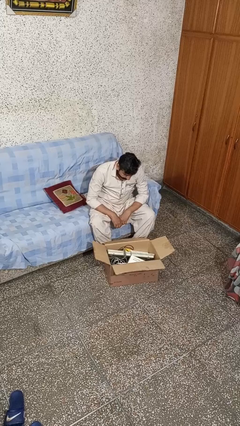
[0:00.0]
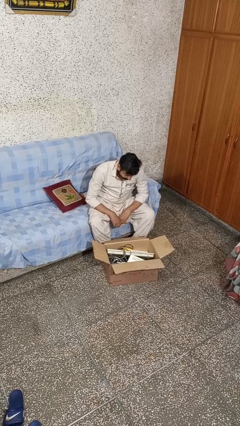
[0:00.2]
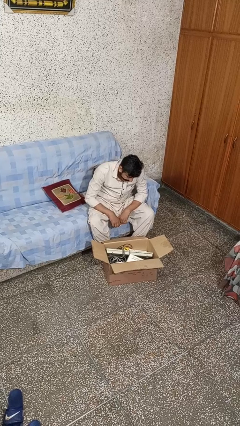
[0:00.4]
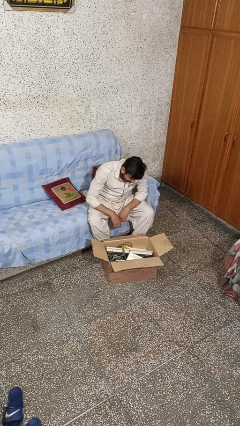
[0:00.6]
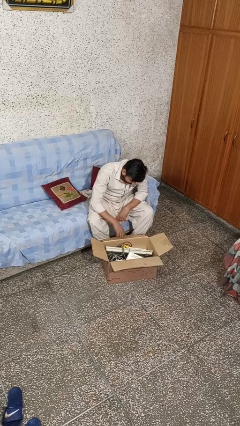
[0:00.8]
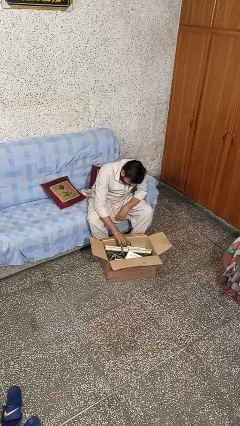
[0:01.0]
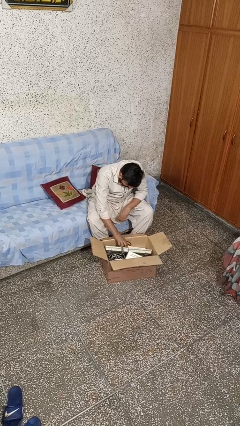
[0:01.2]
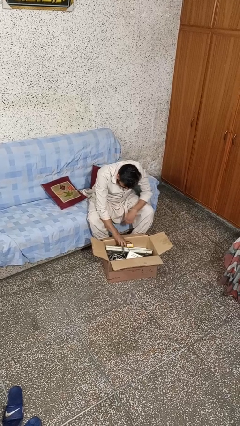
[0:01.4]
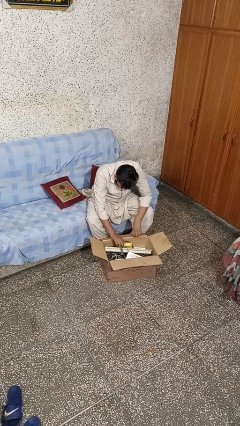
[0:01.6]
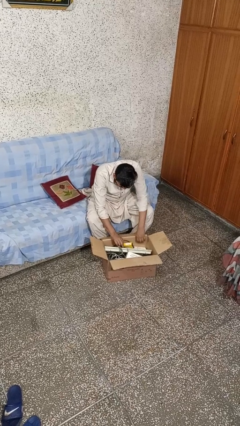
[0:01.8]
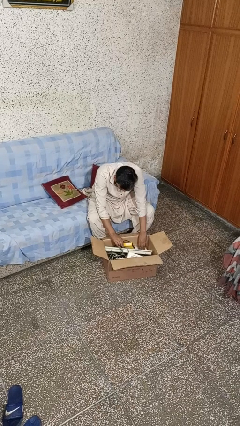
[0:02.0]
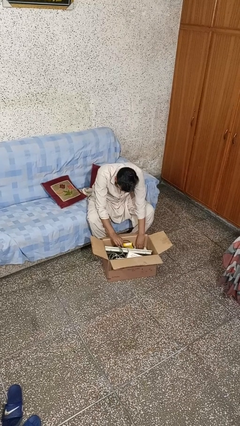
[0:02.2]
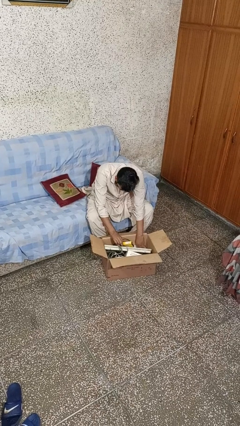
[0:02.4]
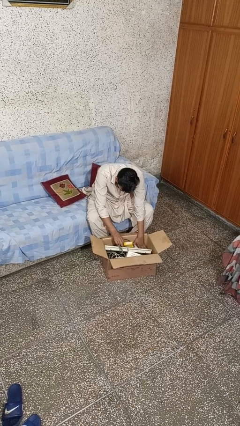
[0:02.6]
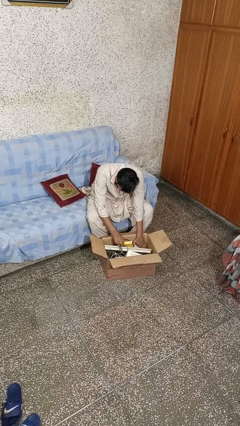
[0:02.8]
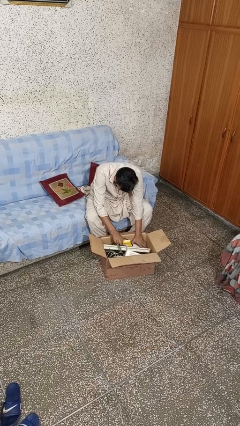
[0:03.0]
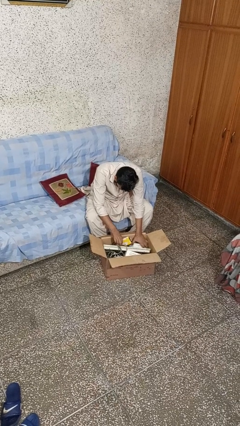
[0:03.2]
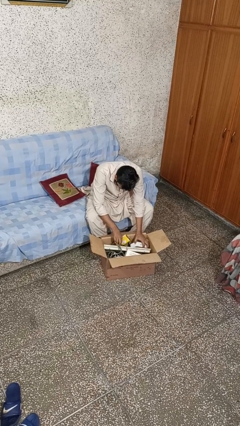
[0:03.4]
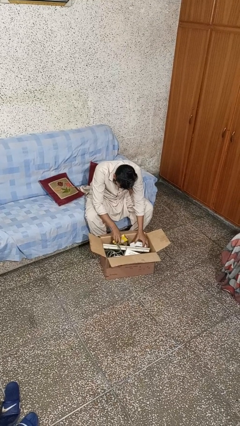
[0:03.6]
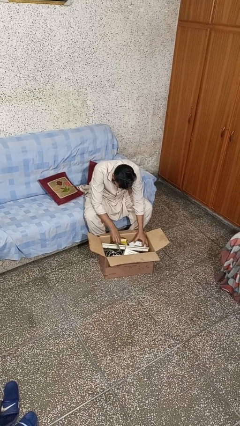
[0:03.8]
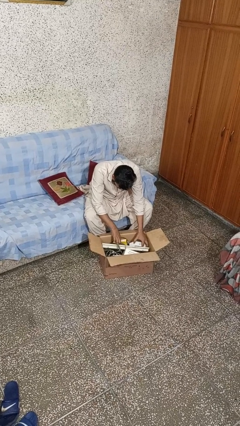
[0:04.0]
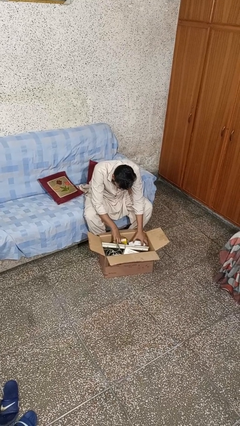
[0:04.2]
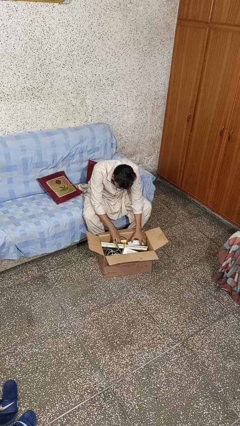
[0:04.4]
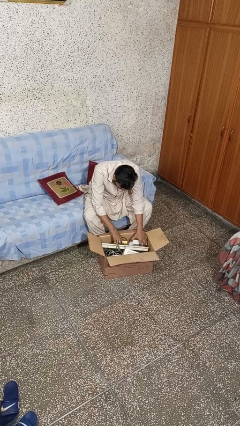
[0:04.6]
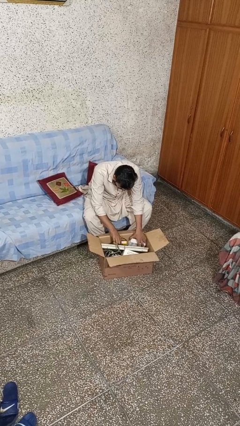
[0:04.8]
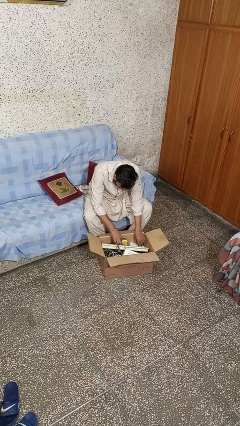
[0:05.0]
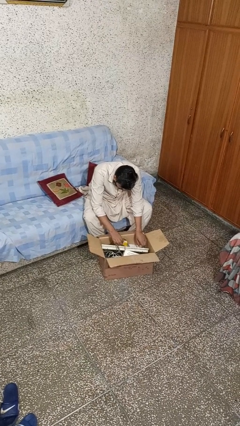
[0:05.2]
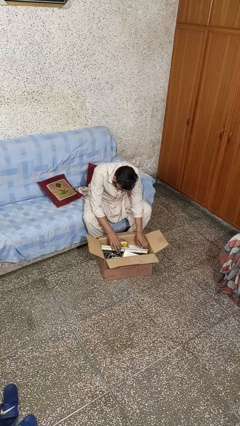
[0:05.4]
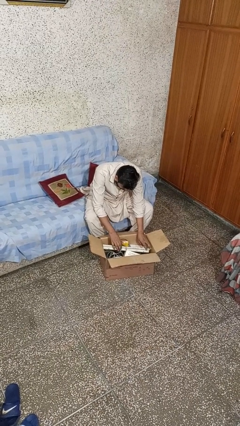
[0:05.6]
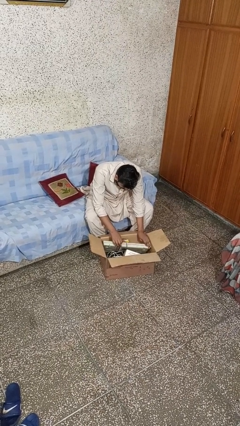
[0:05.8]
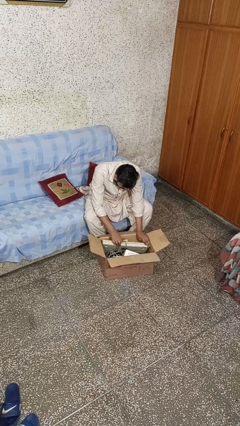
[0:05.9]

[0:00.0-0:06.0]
person searches in box

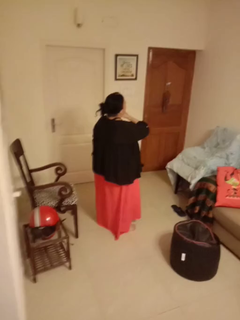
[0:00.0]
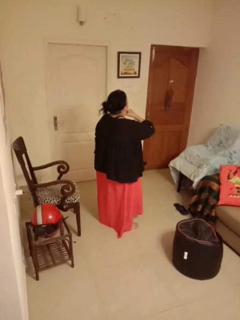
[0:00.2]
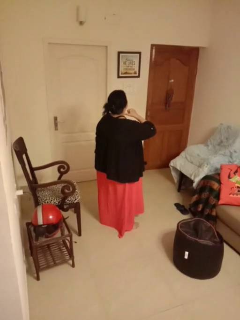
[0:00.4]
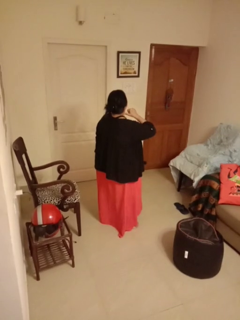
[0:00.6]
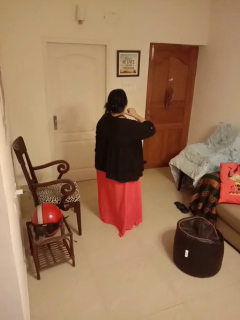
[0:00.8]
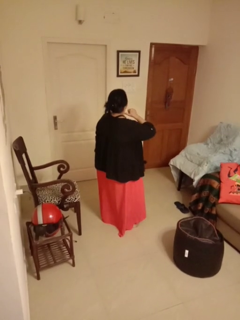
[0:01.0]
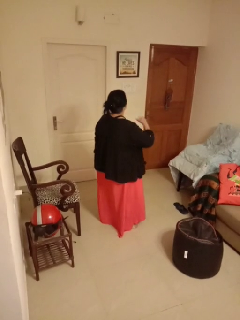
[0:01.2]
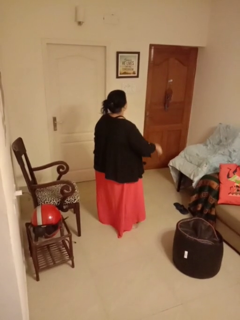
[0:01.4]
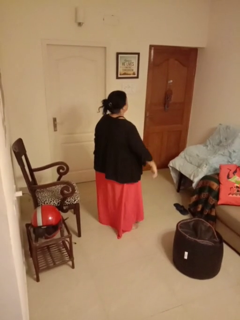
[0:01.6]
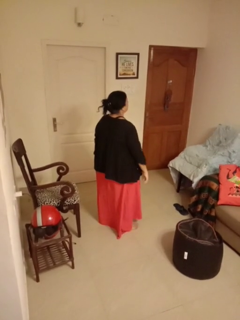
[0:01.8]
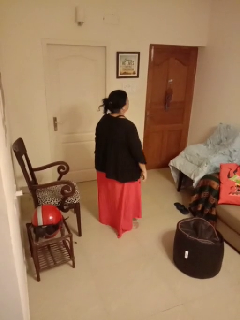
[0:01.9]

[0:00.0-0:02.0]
person gestures cut

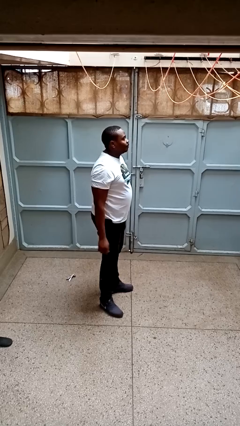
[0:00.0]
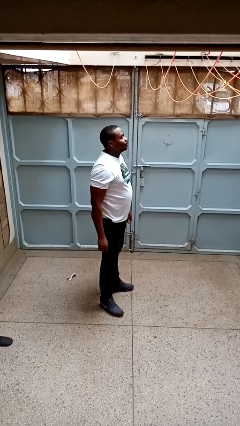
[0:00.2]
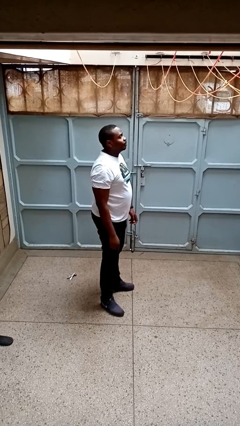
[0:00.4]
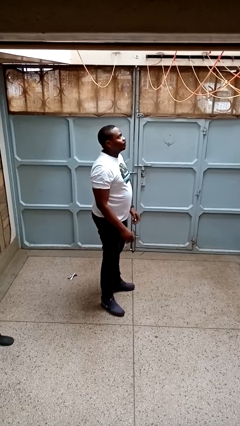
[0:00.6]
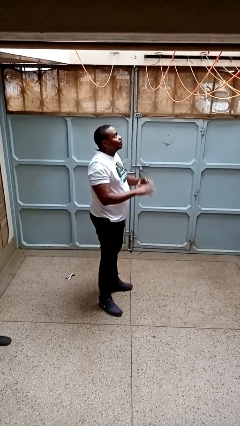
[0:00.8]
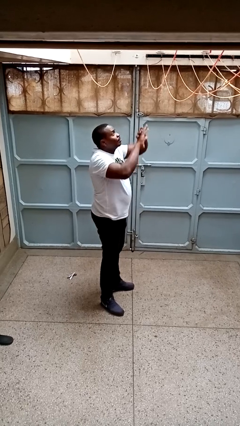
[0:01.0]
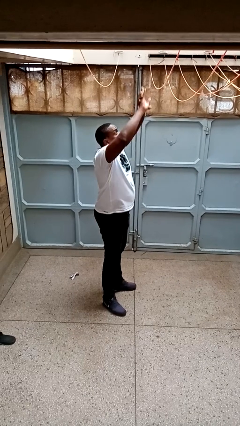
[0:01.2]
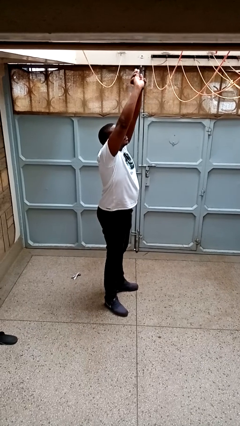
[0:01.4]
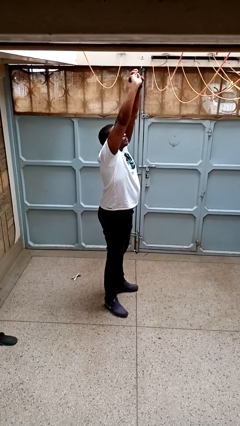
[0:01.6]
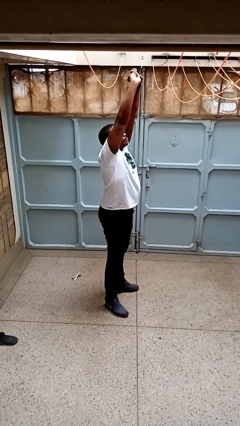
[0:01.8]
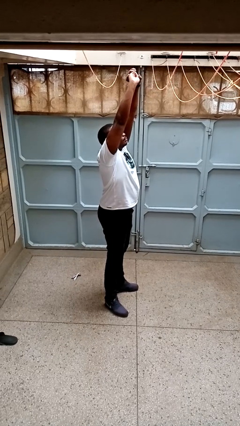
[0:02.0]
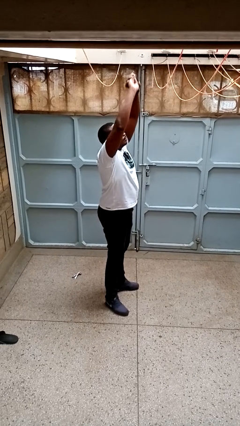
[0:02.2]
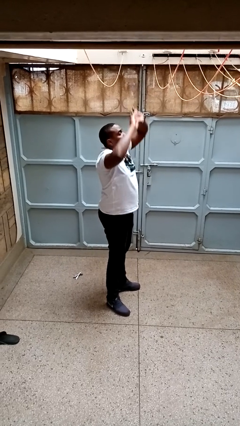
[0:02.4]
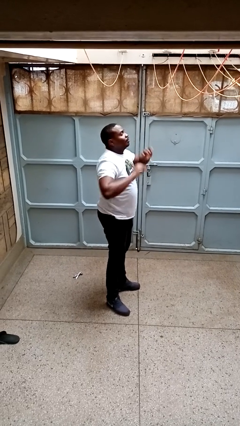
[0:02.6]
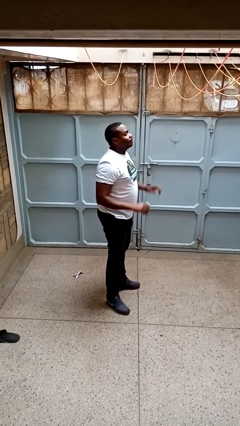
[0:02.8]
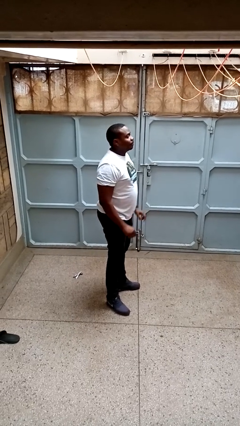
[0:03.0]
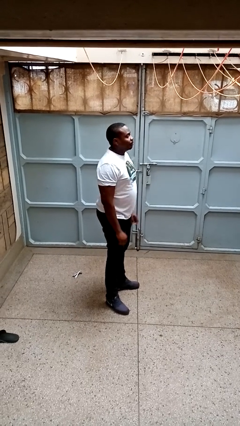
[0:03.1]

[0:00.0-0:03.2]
person stretches arms over head

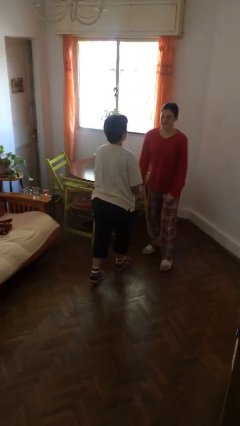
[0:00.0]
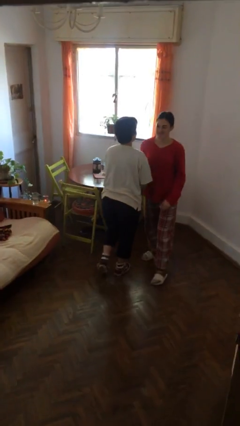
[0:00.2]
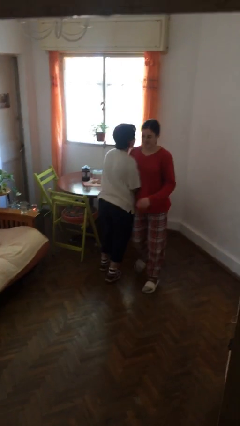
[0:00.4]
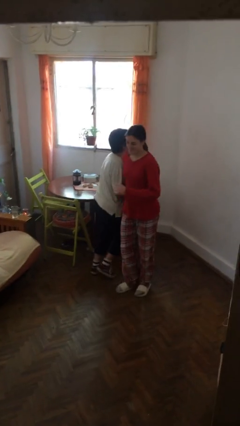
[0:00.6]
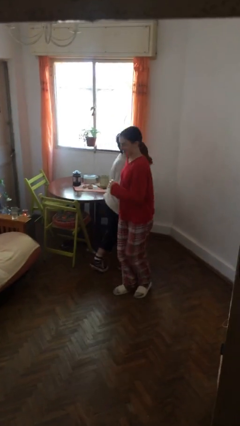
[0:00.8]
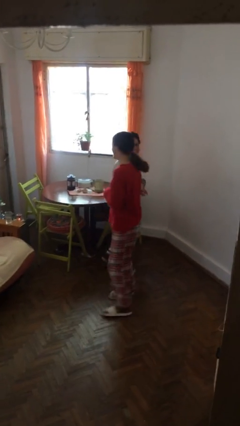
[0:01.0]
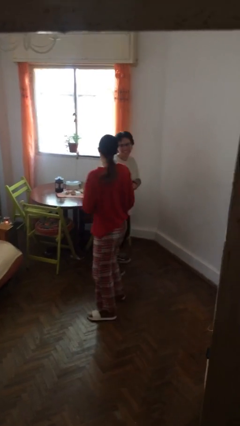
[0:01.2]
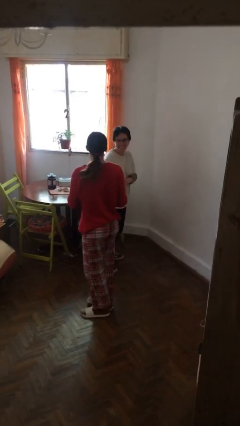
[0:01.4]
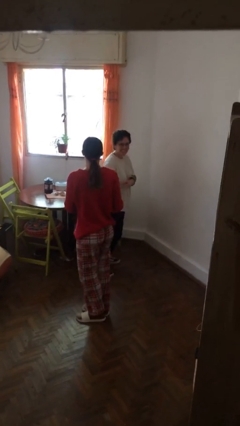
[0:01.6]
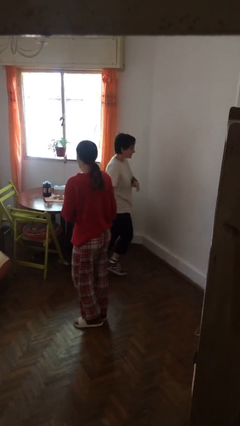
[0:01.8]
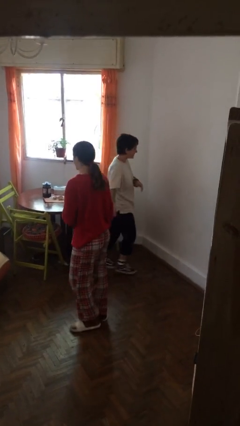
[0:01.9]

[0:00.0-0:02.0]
person bumps into person

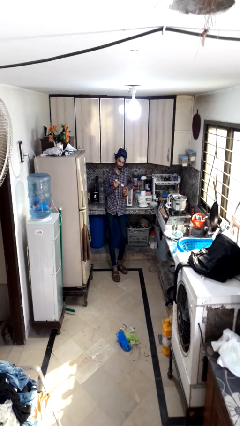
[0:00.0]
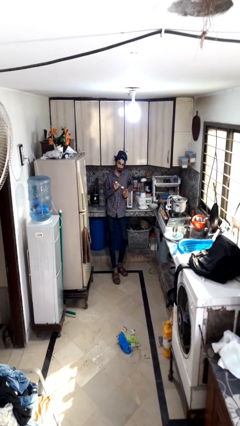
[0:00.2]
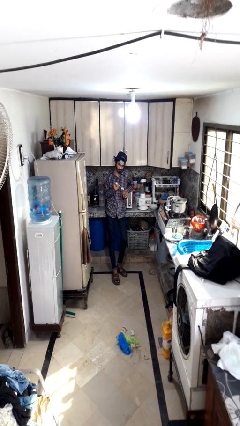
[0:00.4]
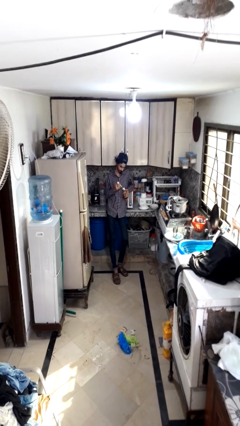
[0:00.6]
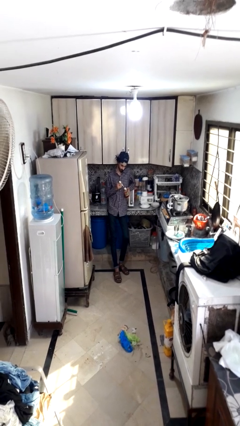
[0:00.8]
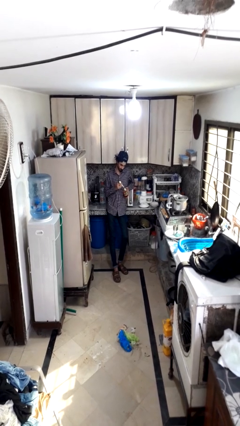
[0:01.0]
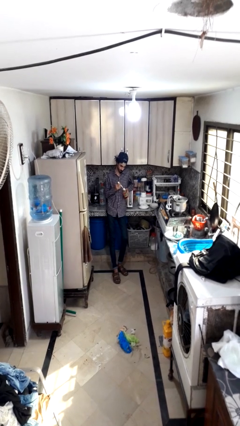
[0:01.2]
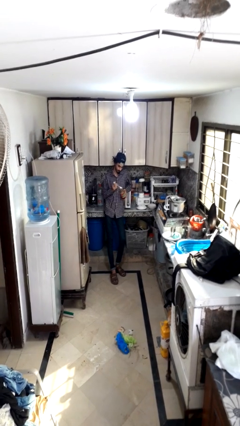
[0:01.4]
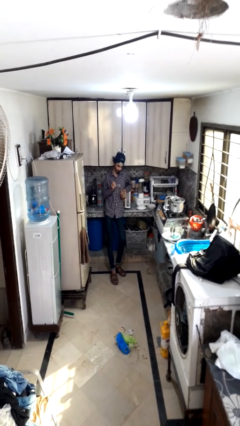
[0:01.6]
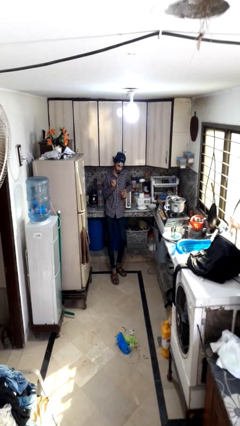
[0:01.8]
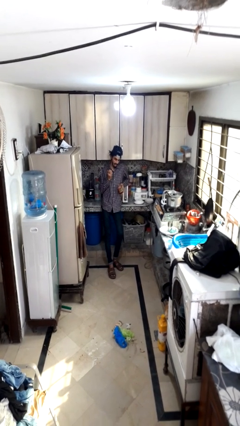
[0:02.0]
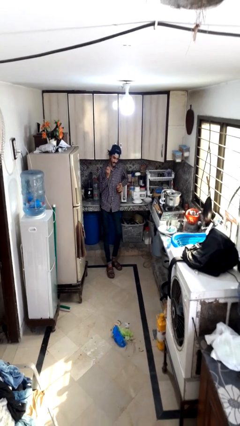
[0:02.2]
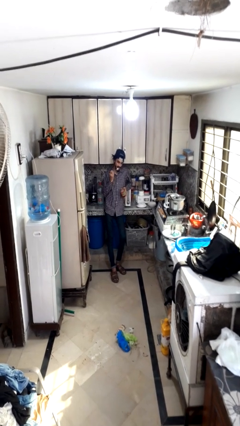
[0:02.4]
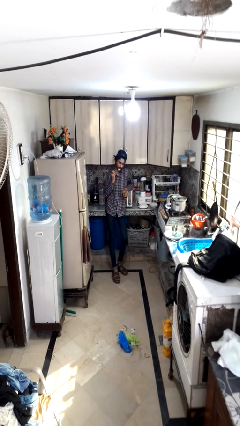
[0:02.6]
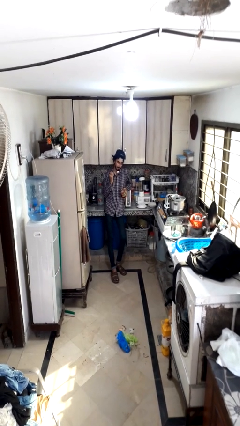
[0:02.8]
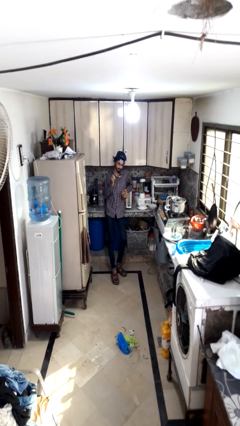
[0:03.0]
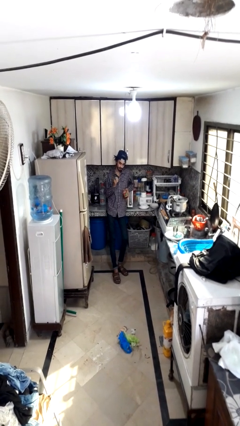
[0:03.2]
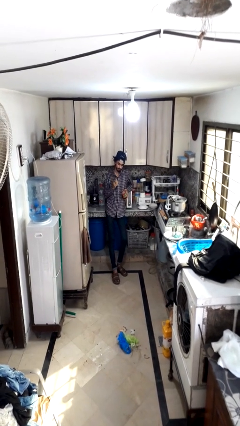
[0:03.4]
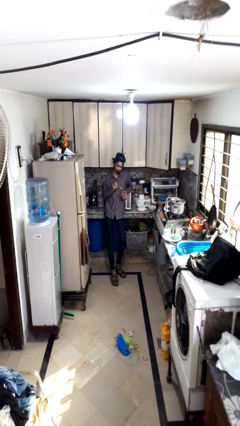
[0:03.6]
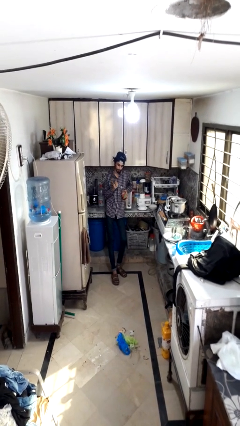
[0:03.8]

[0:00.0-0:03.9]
person eats with utensil

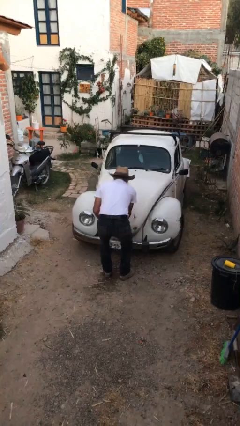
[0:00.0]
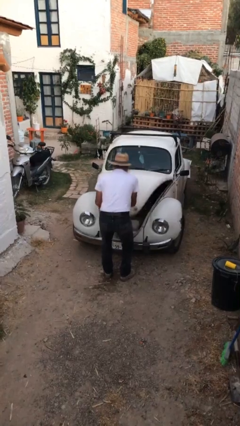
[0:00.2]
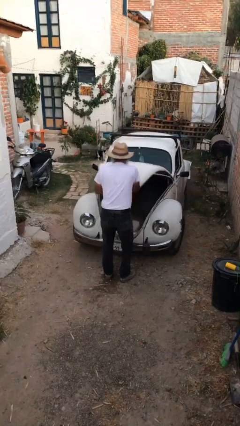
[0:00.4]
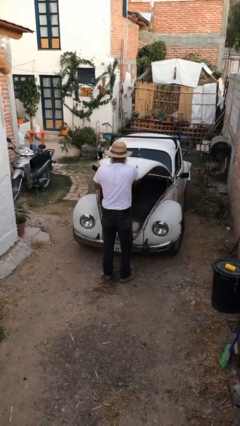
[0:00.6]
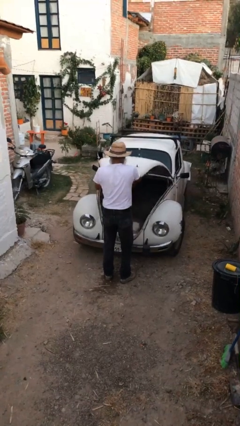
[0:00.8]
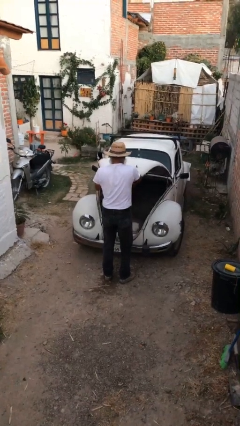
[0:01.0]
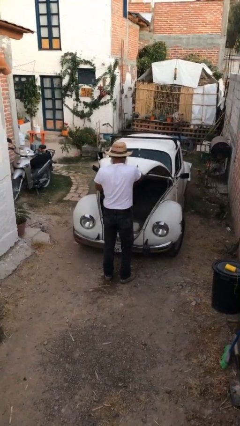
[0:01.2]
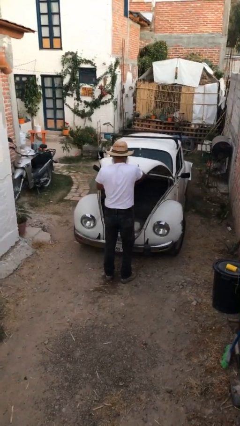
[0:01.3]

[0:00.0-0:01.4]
person opens car trunk
